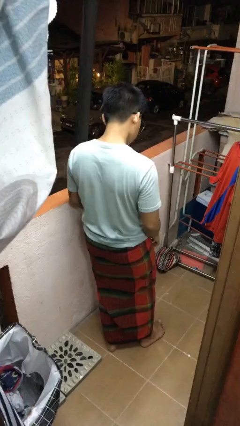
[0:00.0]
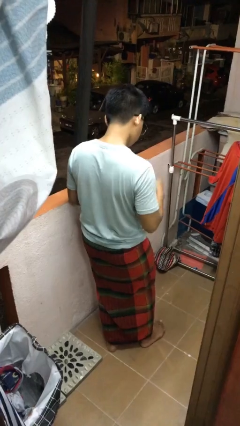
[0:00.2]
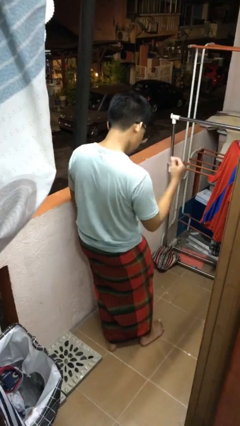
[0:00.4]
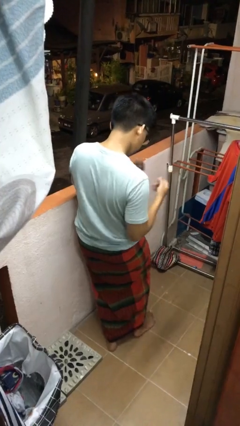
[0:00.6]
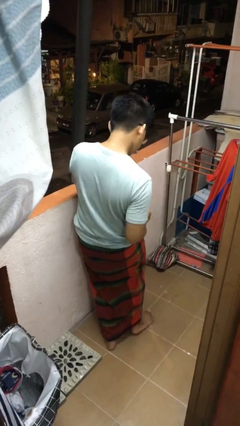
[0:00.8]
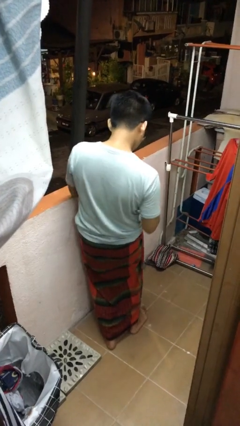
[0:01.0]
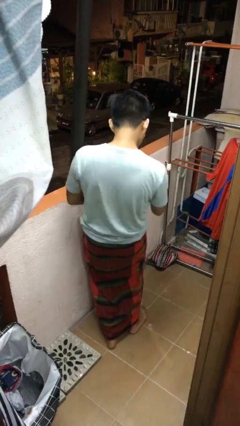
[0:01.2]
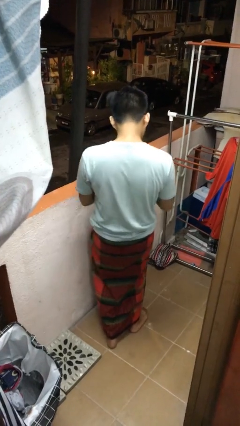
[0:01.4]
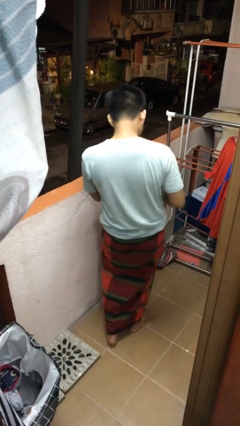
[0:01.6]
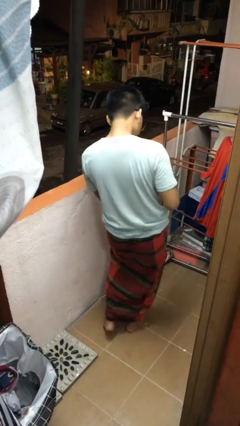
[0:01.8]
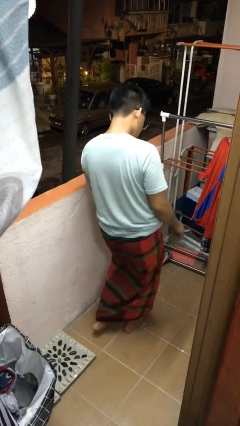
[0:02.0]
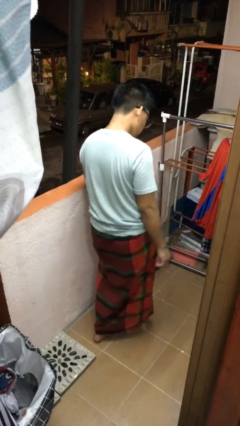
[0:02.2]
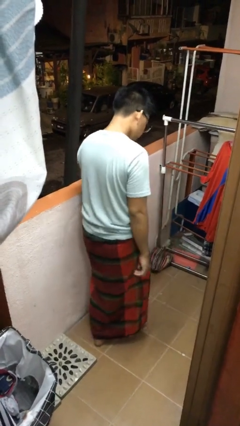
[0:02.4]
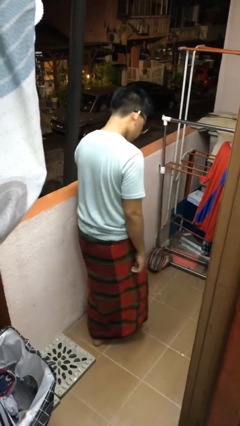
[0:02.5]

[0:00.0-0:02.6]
person dances in place

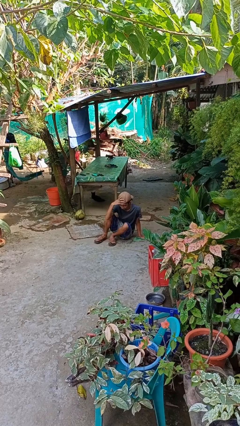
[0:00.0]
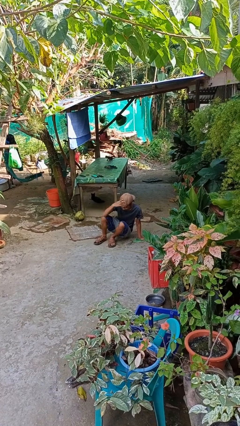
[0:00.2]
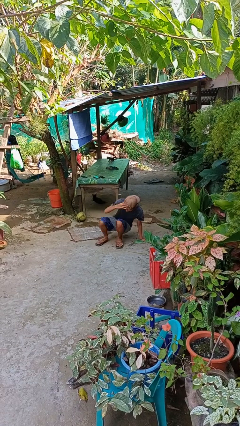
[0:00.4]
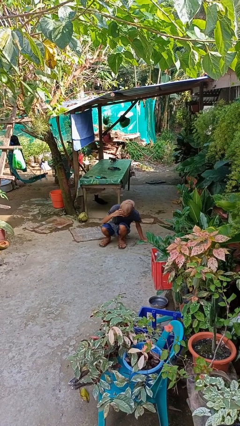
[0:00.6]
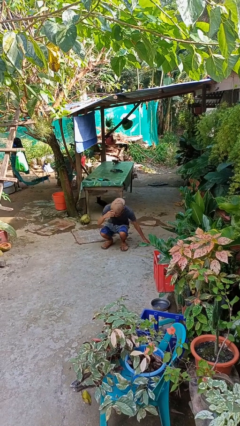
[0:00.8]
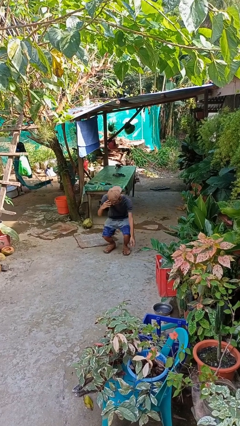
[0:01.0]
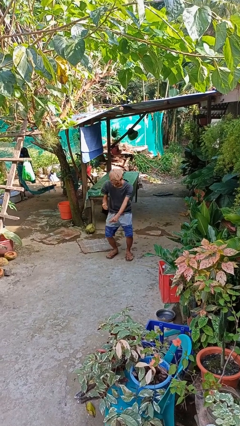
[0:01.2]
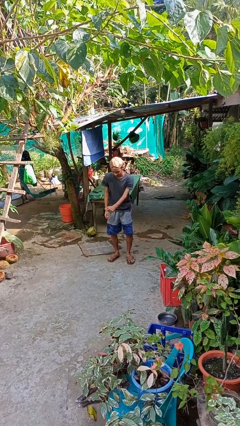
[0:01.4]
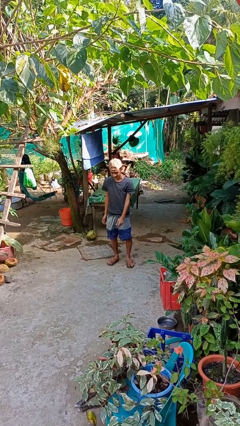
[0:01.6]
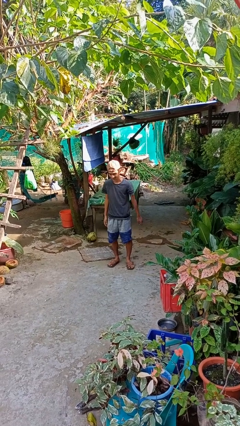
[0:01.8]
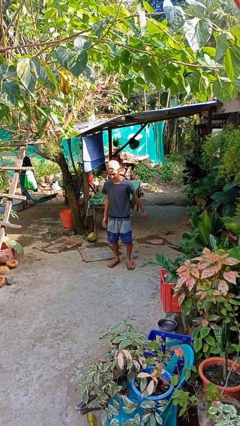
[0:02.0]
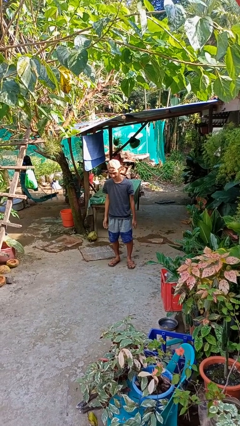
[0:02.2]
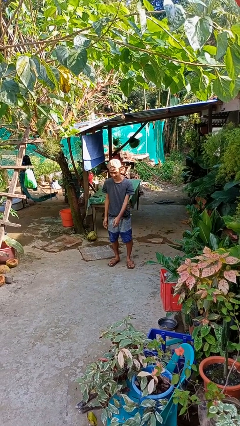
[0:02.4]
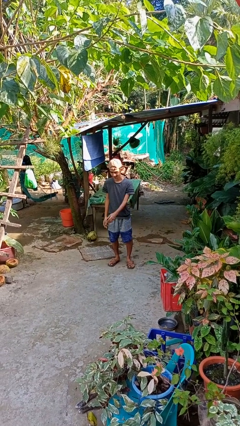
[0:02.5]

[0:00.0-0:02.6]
person stands up from floor

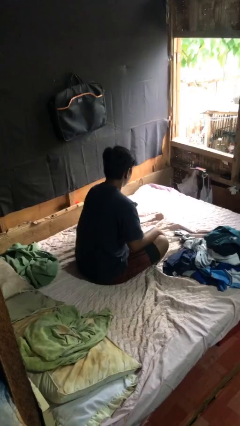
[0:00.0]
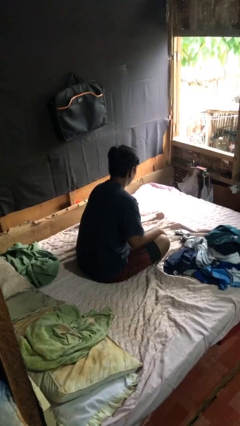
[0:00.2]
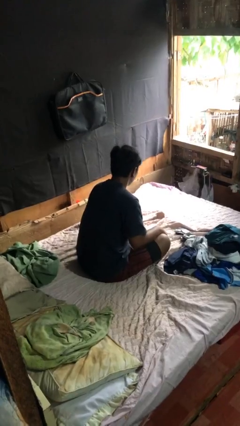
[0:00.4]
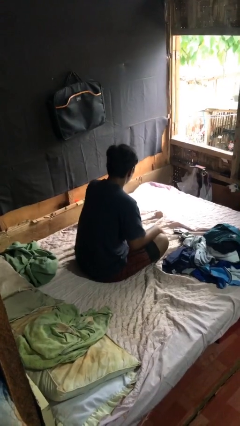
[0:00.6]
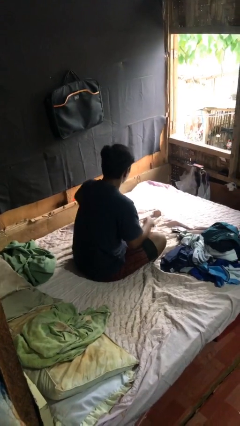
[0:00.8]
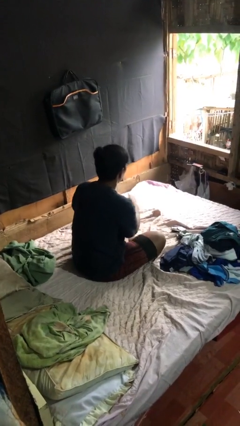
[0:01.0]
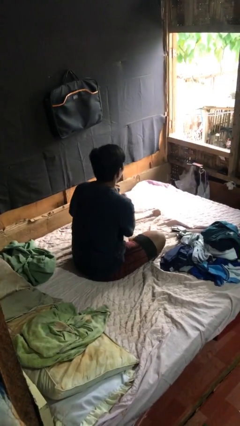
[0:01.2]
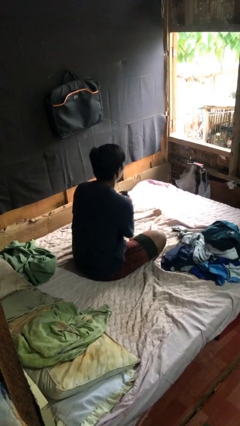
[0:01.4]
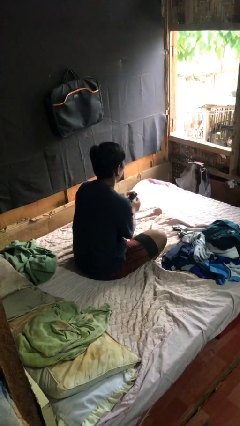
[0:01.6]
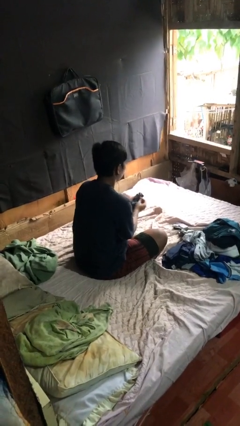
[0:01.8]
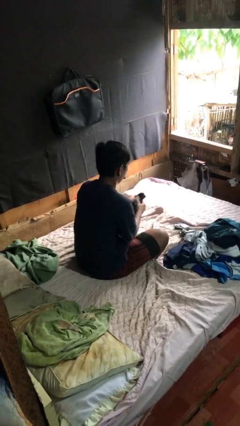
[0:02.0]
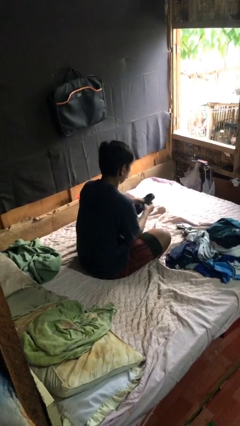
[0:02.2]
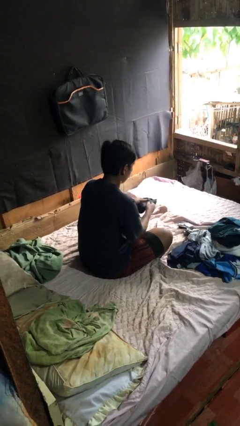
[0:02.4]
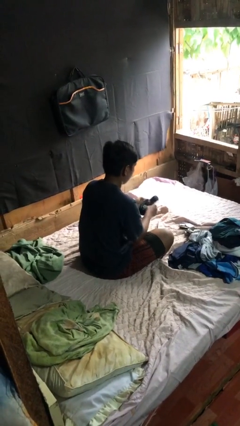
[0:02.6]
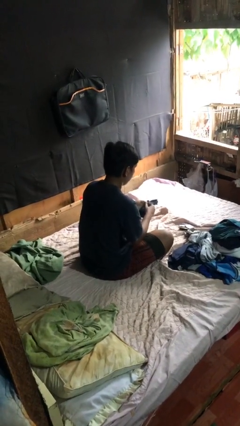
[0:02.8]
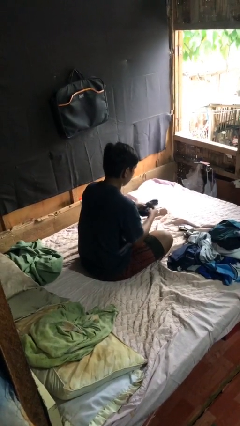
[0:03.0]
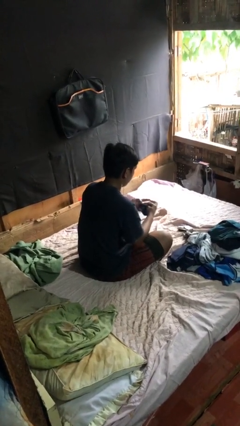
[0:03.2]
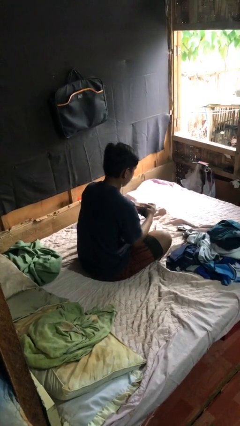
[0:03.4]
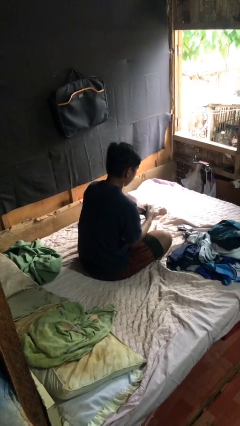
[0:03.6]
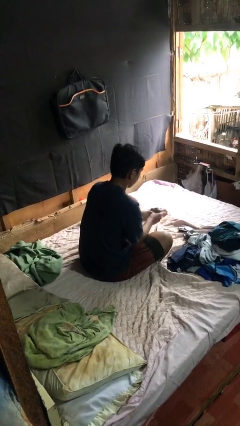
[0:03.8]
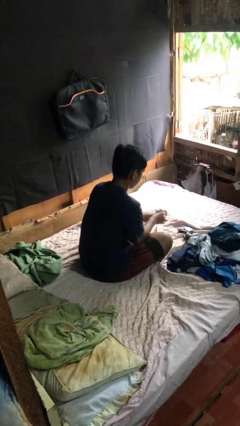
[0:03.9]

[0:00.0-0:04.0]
person folds socks

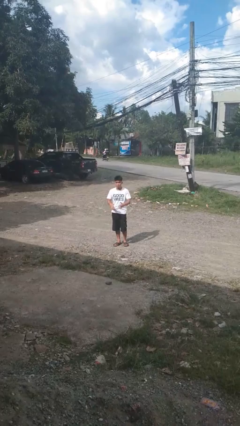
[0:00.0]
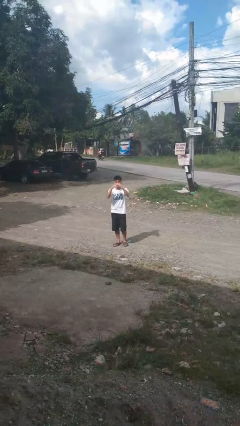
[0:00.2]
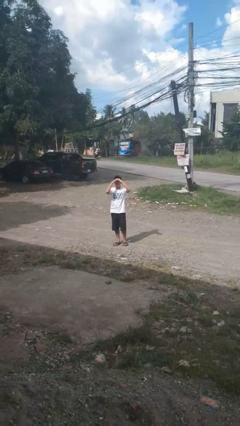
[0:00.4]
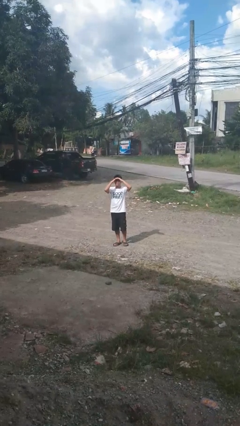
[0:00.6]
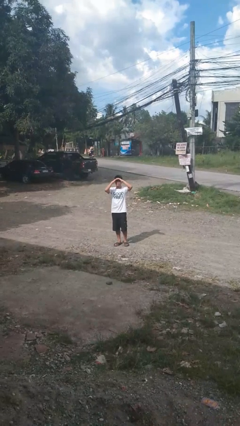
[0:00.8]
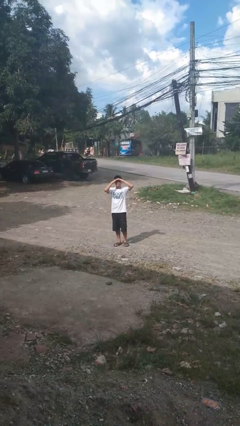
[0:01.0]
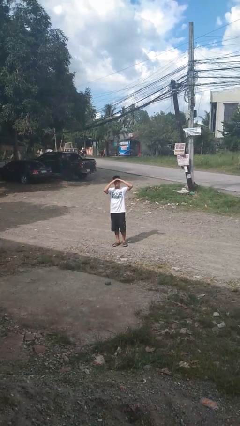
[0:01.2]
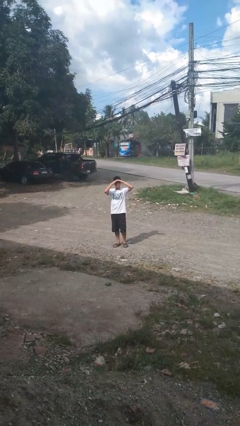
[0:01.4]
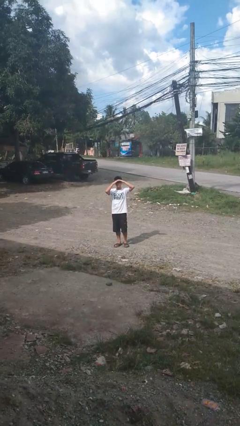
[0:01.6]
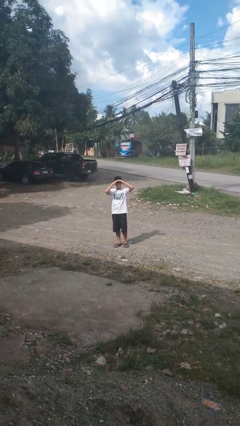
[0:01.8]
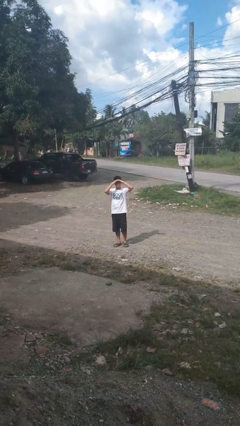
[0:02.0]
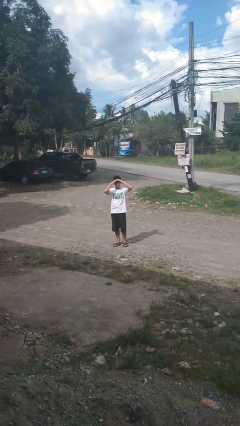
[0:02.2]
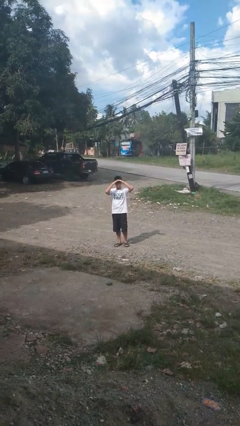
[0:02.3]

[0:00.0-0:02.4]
person shades eyes

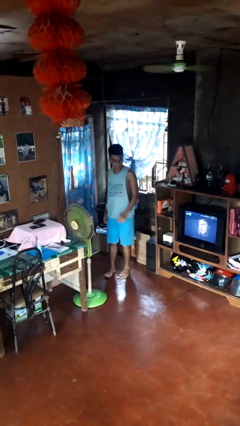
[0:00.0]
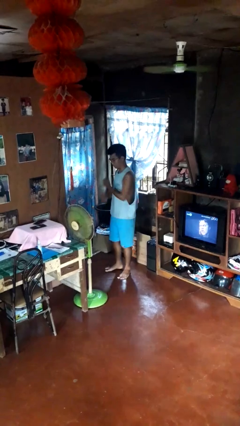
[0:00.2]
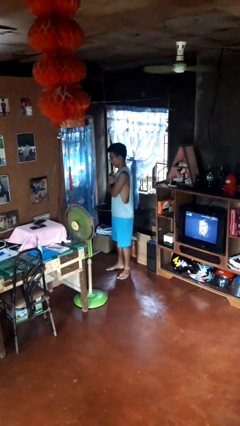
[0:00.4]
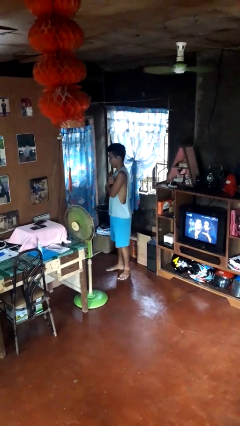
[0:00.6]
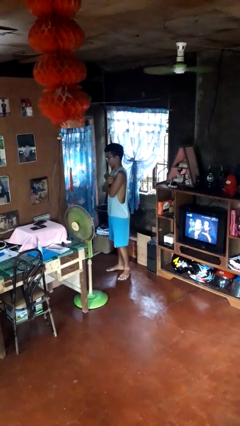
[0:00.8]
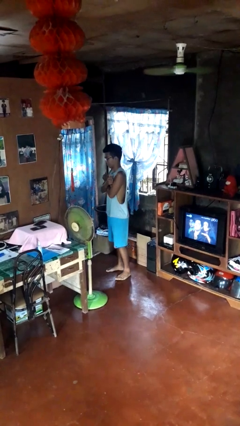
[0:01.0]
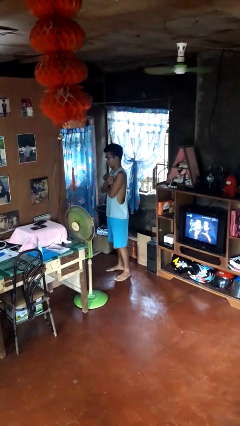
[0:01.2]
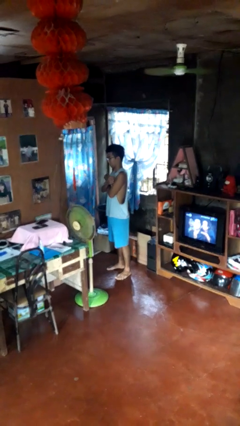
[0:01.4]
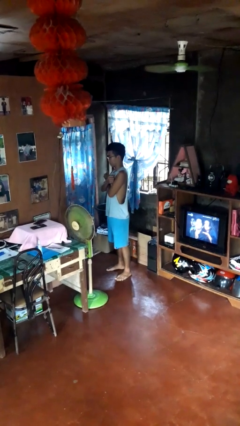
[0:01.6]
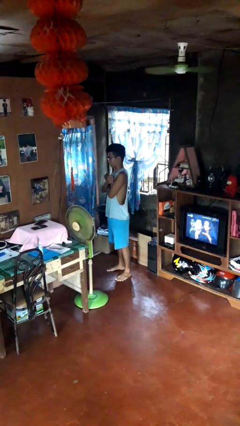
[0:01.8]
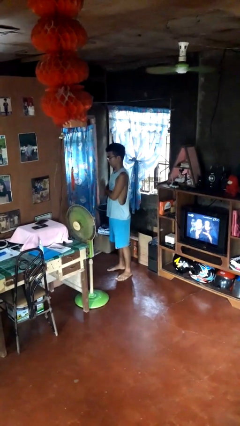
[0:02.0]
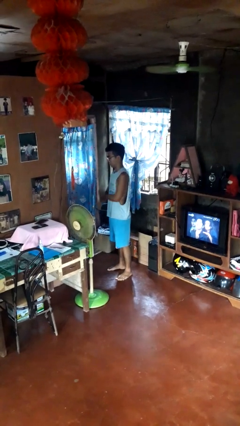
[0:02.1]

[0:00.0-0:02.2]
person gestures arms x

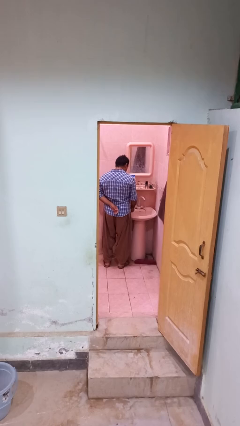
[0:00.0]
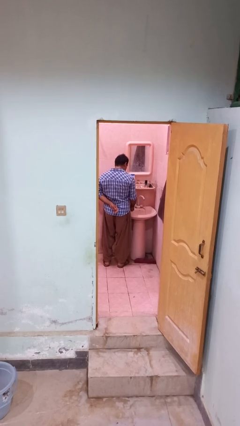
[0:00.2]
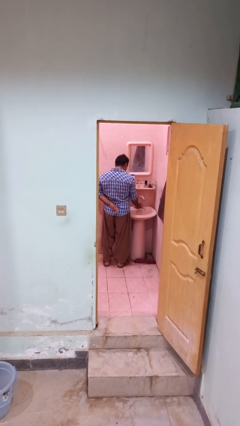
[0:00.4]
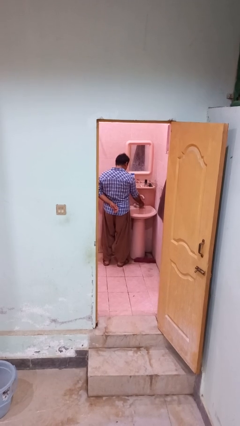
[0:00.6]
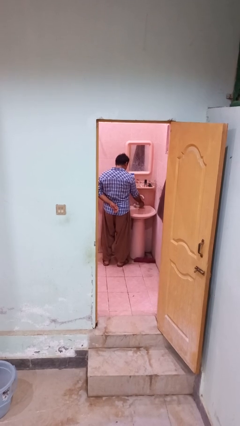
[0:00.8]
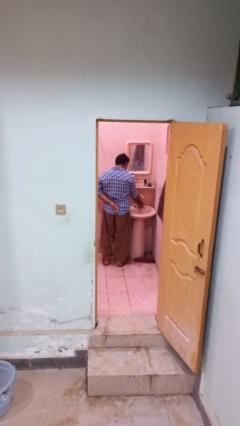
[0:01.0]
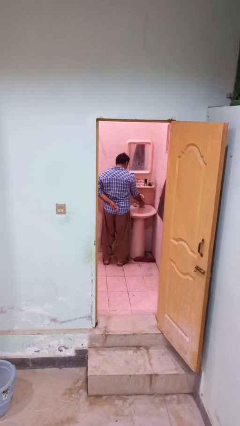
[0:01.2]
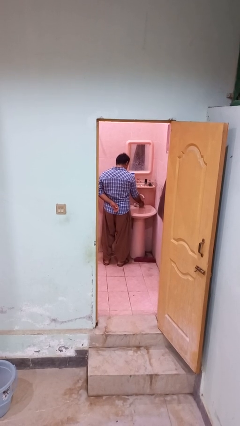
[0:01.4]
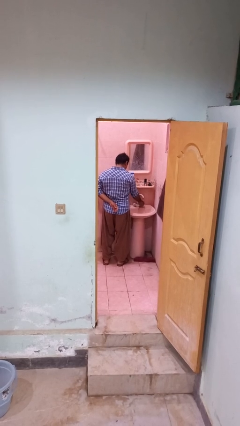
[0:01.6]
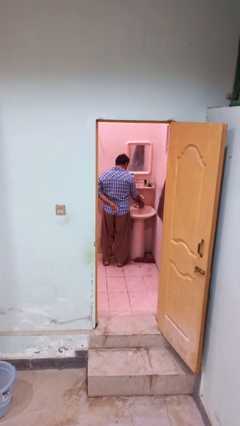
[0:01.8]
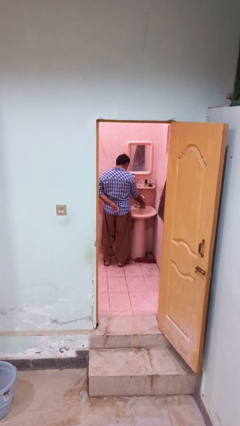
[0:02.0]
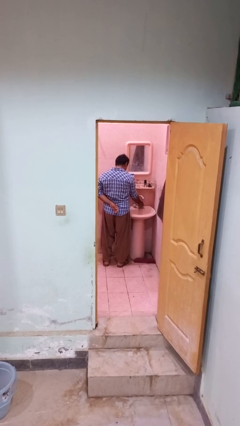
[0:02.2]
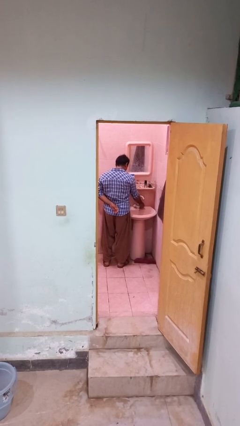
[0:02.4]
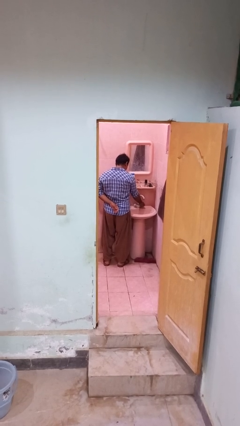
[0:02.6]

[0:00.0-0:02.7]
person turns off faucet

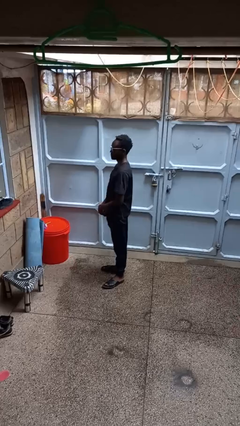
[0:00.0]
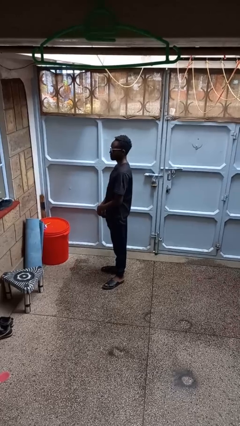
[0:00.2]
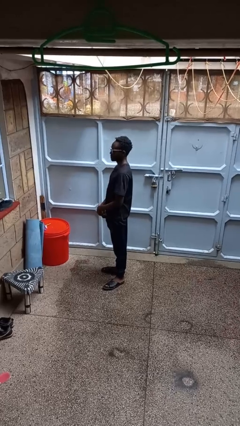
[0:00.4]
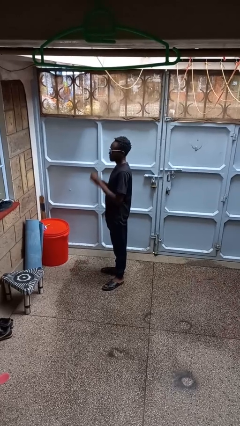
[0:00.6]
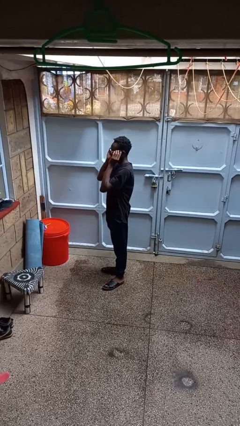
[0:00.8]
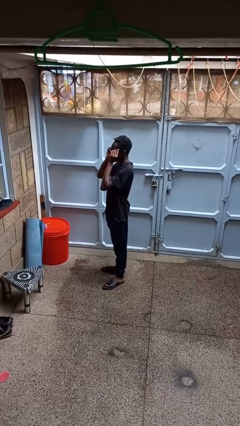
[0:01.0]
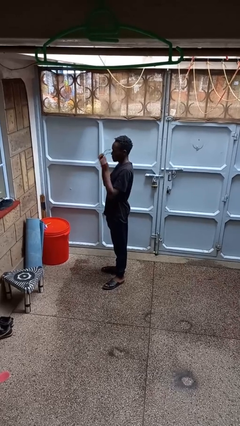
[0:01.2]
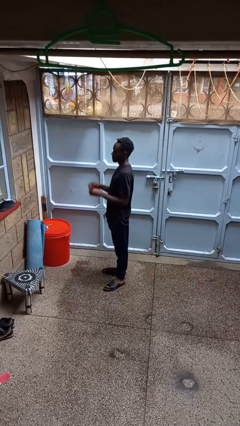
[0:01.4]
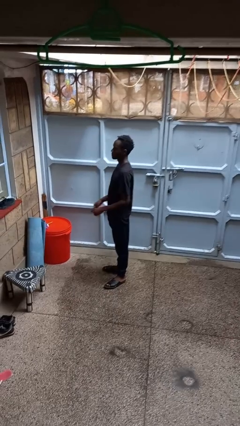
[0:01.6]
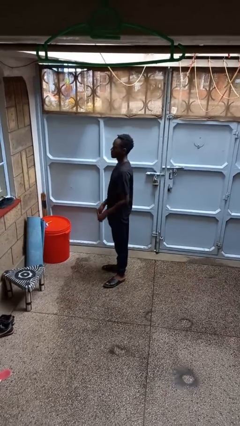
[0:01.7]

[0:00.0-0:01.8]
person takes off glasses
